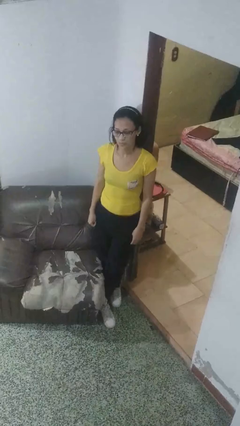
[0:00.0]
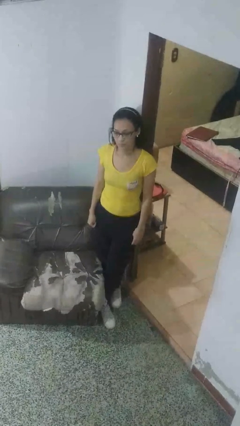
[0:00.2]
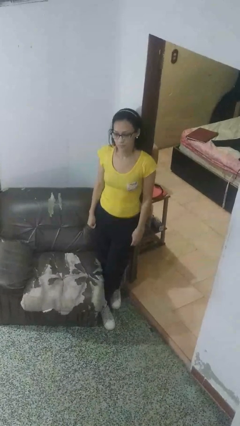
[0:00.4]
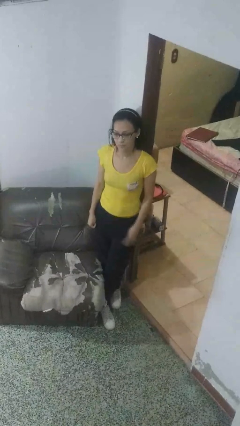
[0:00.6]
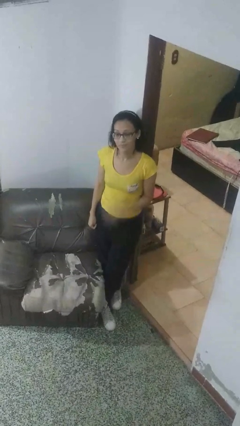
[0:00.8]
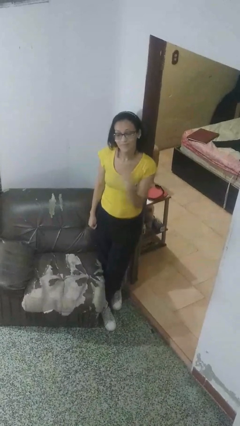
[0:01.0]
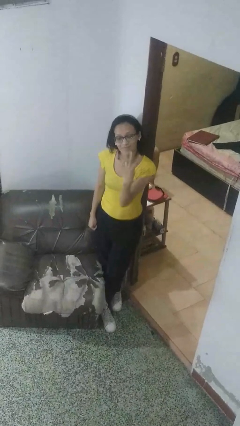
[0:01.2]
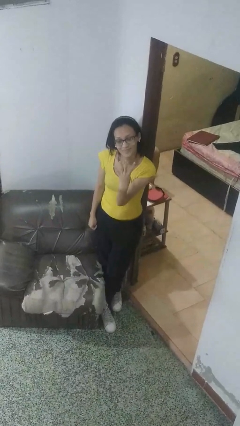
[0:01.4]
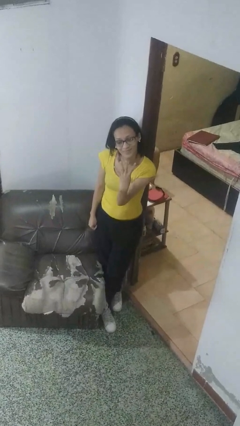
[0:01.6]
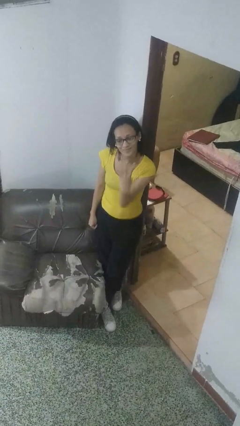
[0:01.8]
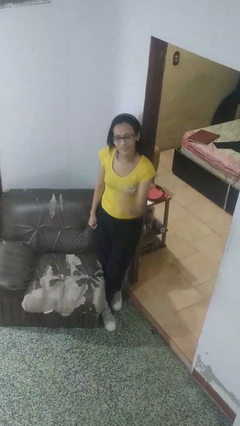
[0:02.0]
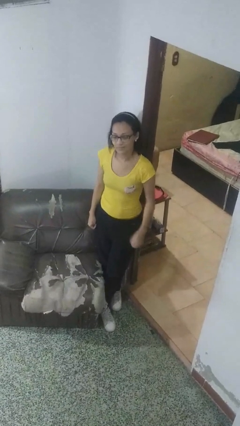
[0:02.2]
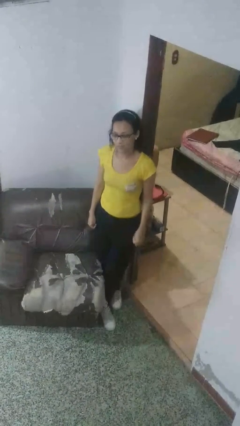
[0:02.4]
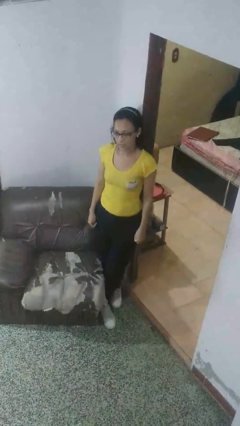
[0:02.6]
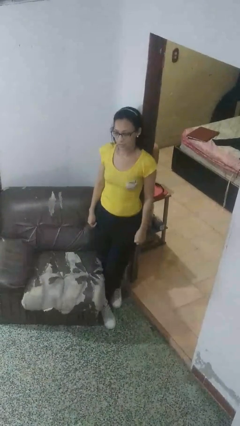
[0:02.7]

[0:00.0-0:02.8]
person gestures number four

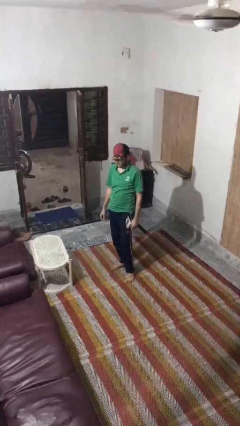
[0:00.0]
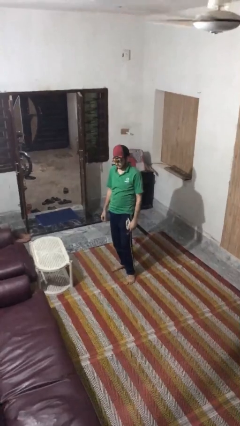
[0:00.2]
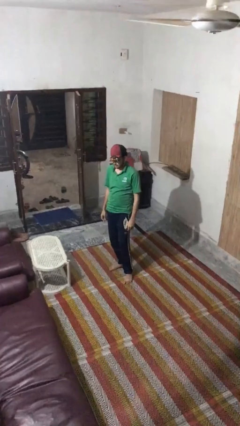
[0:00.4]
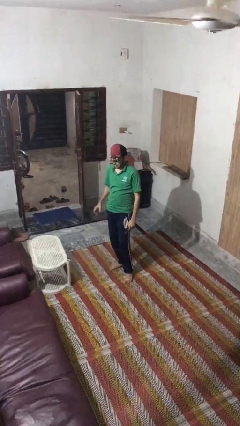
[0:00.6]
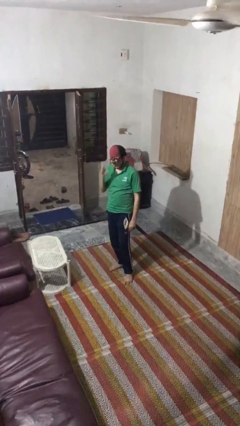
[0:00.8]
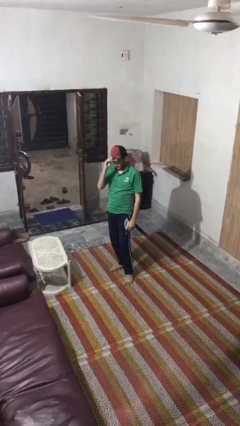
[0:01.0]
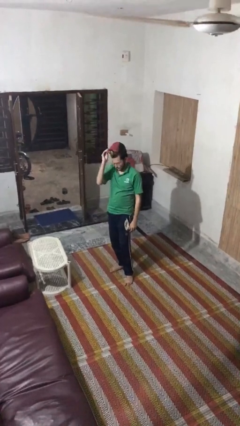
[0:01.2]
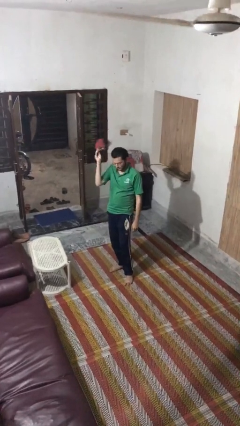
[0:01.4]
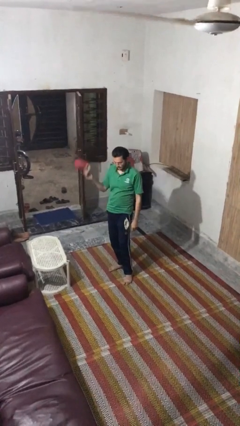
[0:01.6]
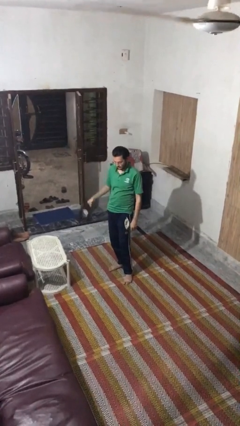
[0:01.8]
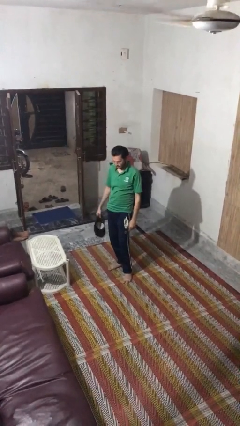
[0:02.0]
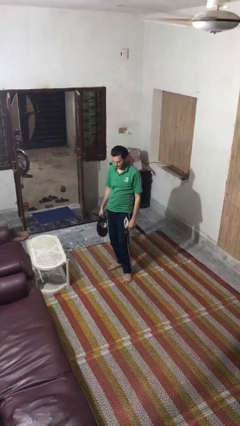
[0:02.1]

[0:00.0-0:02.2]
person takes off hat

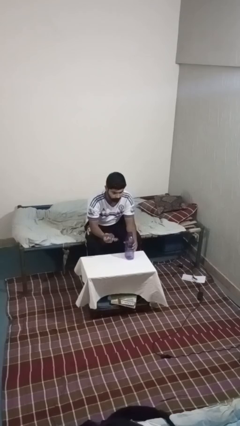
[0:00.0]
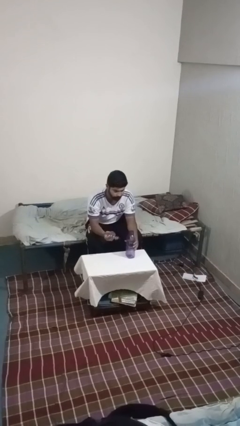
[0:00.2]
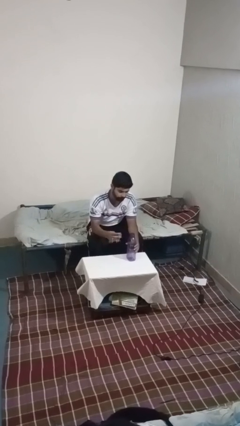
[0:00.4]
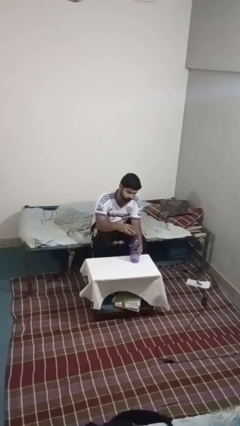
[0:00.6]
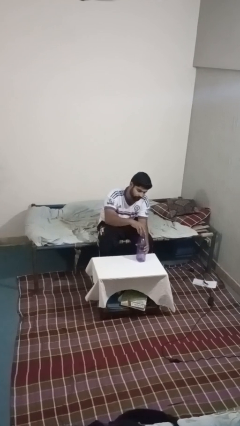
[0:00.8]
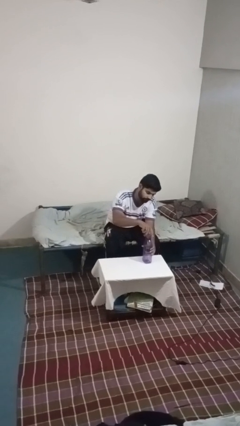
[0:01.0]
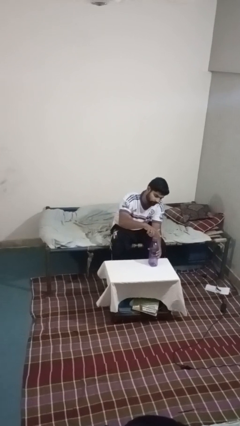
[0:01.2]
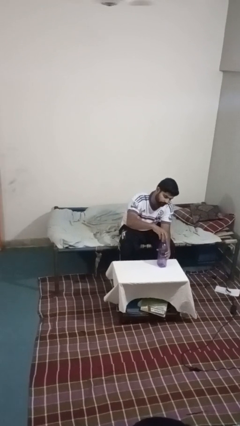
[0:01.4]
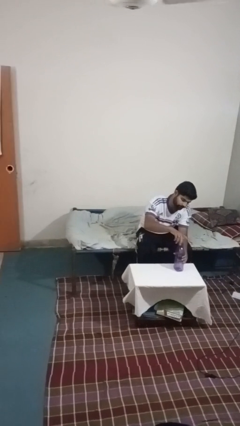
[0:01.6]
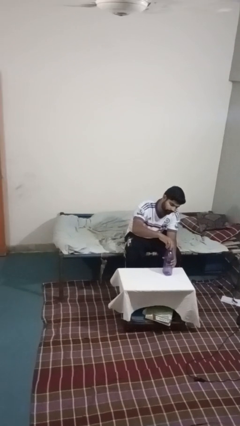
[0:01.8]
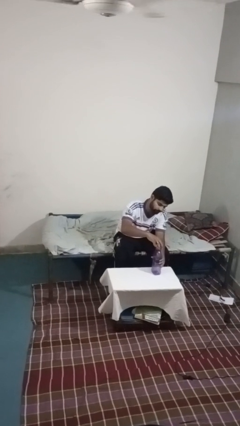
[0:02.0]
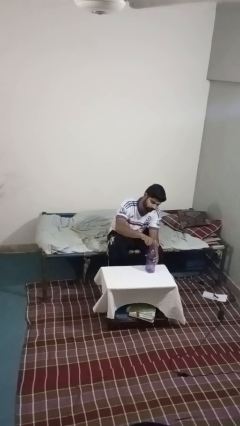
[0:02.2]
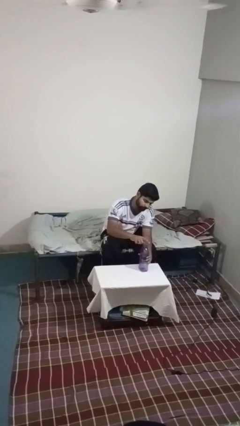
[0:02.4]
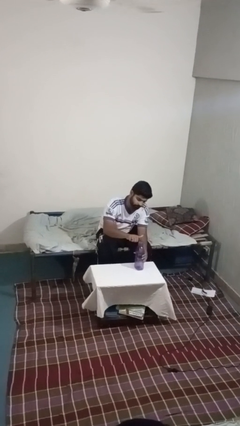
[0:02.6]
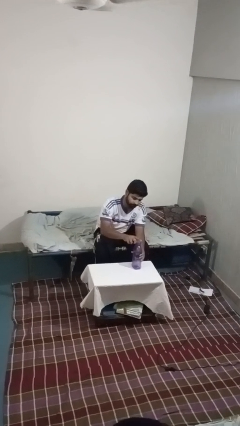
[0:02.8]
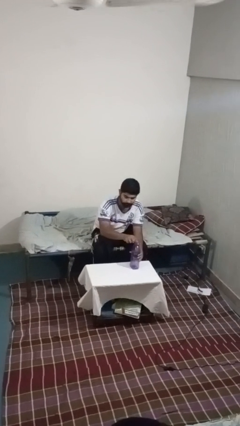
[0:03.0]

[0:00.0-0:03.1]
person screws lid to bottle

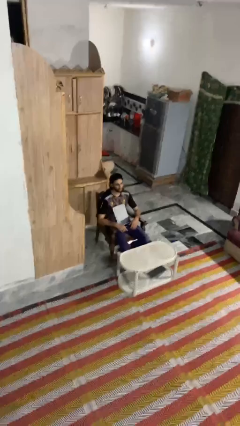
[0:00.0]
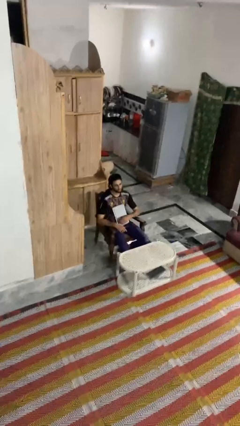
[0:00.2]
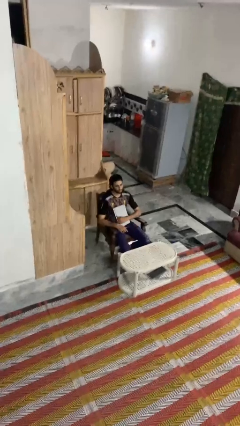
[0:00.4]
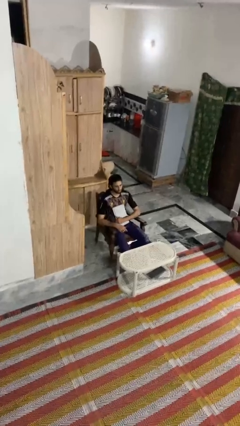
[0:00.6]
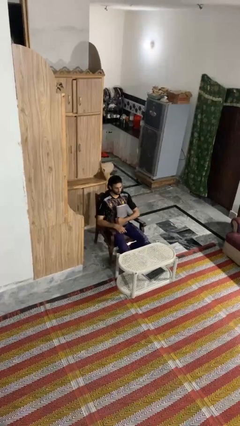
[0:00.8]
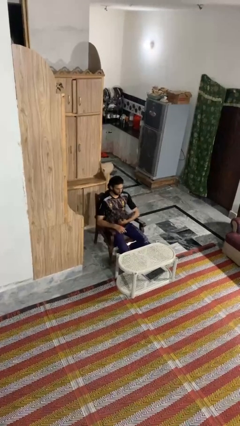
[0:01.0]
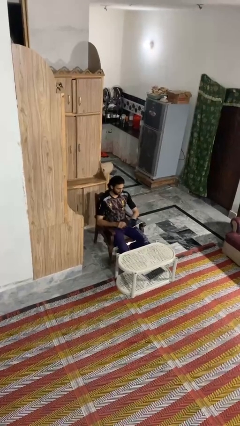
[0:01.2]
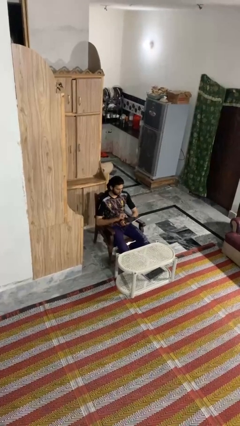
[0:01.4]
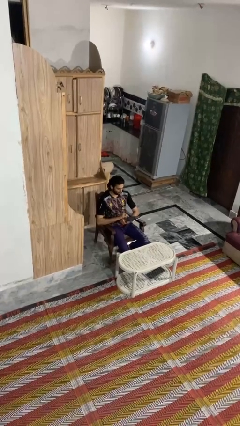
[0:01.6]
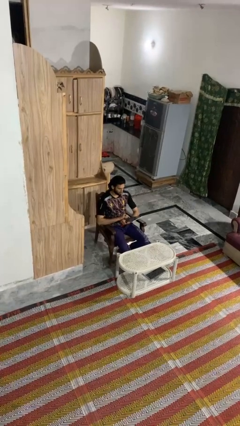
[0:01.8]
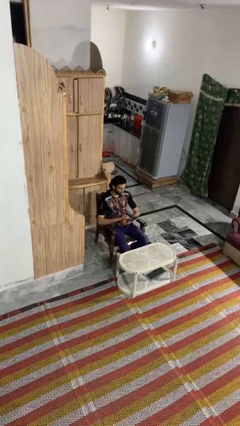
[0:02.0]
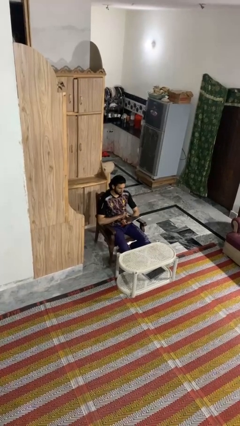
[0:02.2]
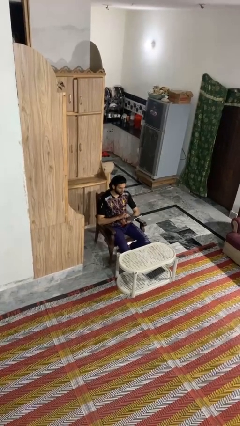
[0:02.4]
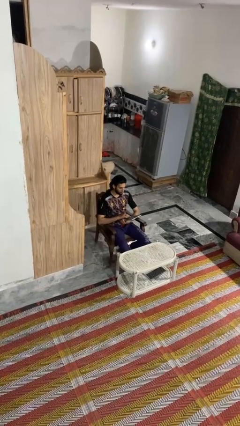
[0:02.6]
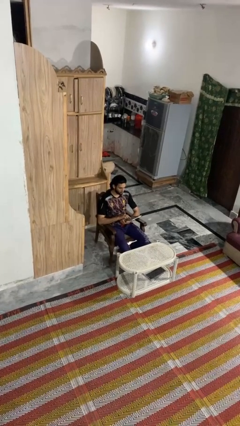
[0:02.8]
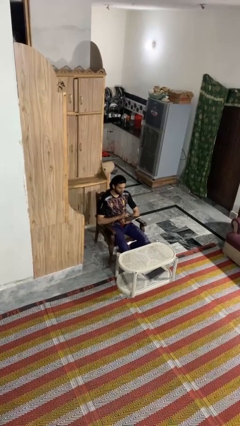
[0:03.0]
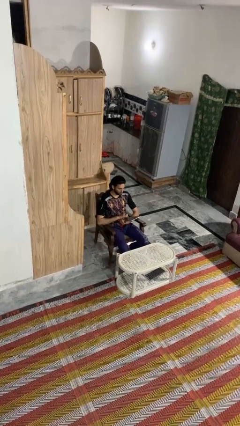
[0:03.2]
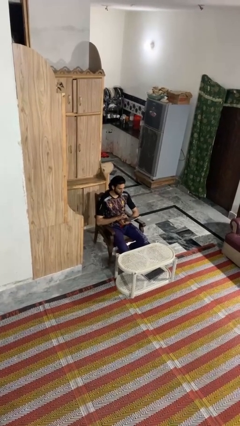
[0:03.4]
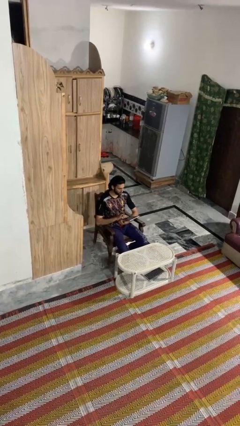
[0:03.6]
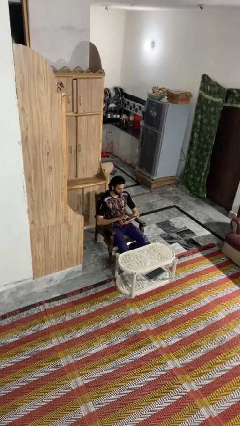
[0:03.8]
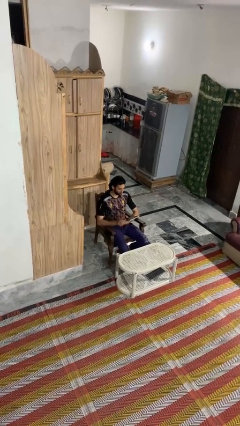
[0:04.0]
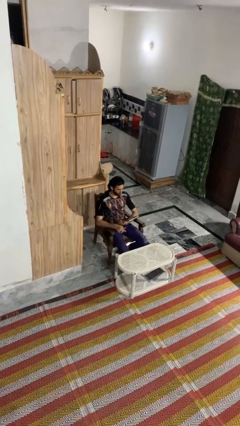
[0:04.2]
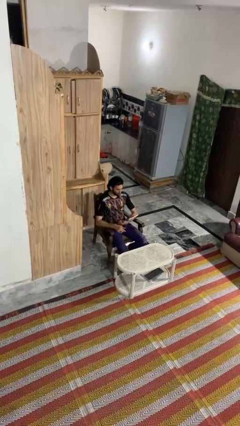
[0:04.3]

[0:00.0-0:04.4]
person interacts with tablet

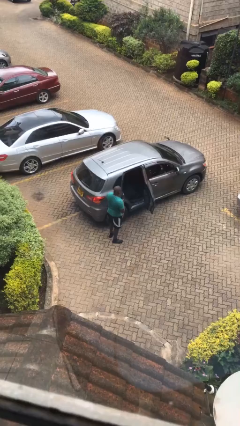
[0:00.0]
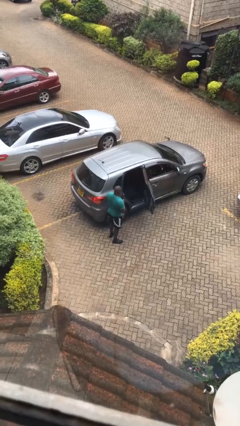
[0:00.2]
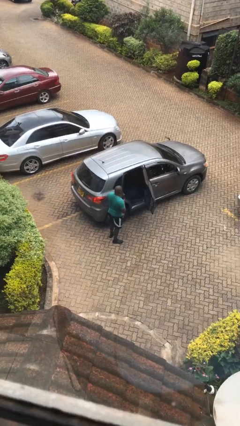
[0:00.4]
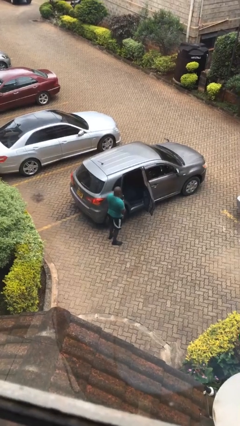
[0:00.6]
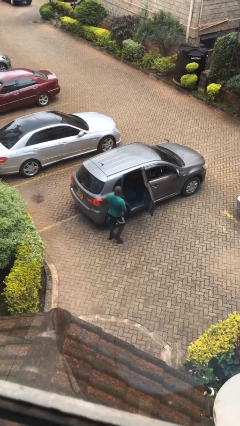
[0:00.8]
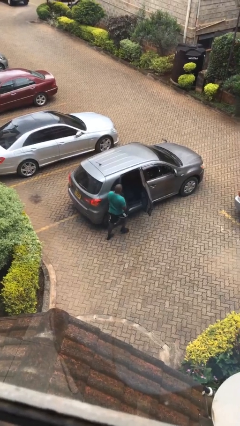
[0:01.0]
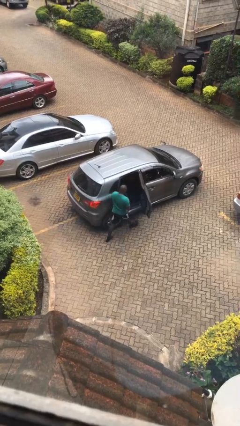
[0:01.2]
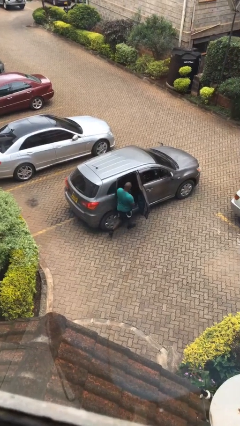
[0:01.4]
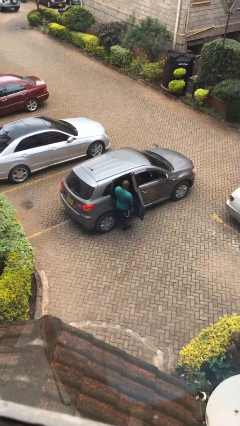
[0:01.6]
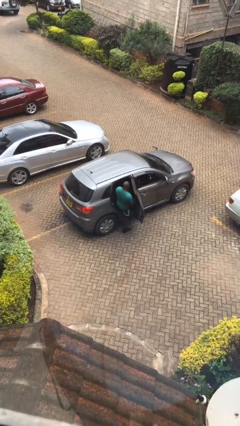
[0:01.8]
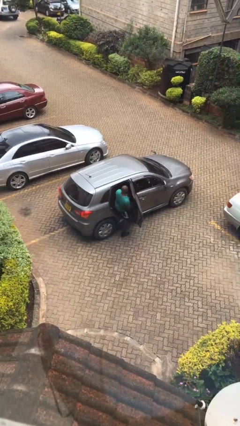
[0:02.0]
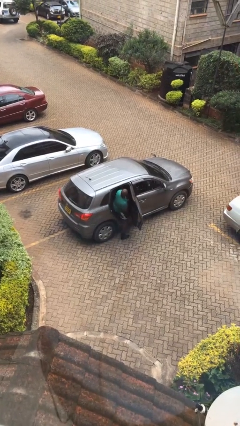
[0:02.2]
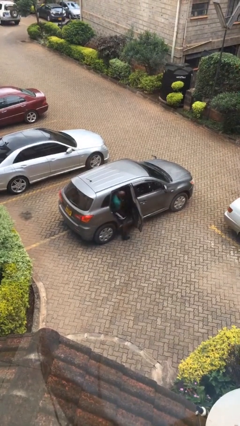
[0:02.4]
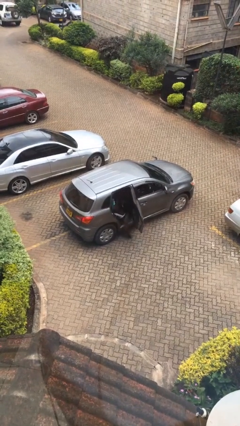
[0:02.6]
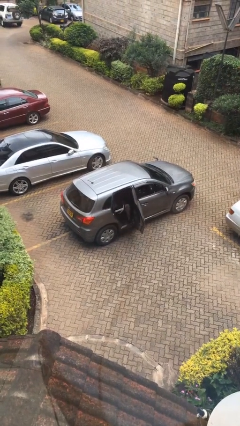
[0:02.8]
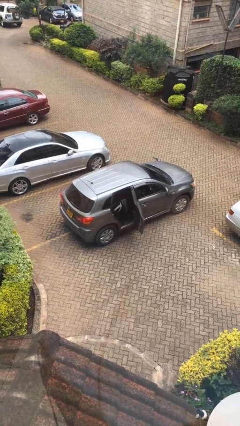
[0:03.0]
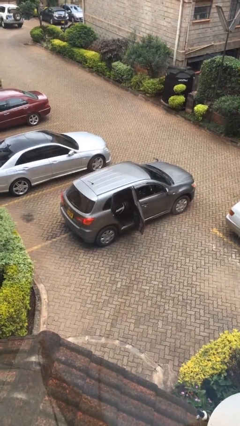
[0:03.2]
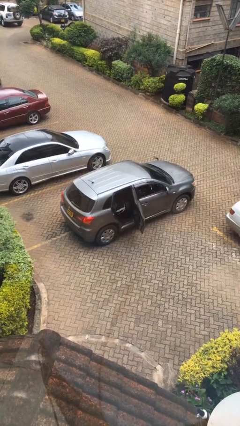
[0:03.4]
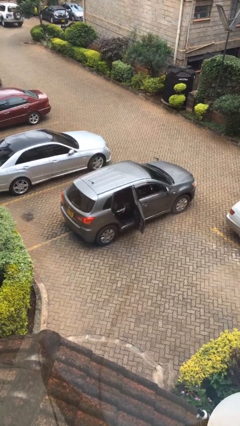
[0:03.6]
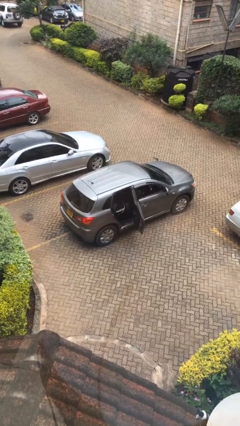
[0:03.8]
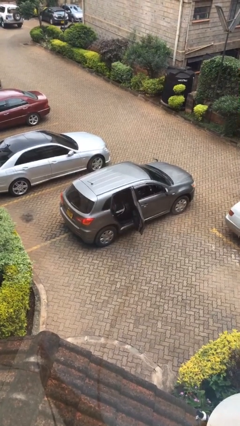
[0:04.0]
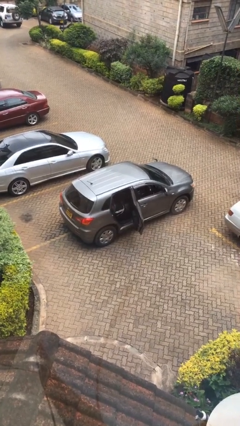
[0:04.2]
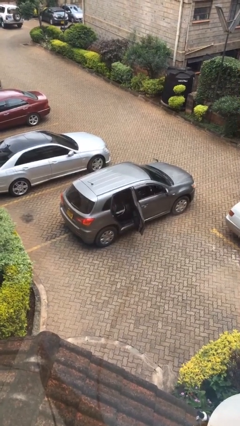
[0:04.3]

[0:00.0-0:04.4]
person enters car

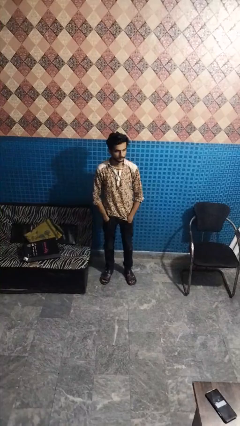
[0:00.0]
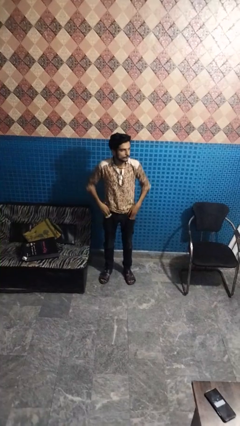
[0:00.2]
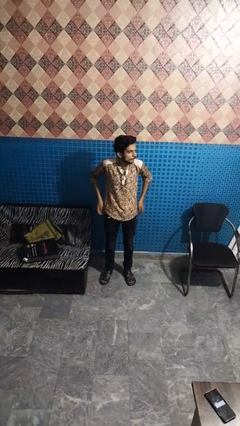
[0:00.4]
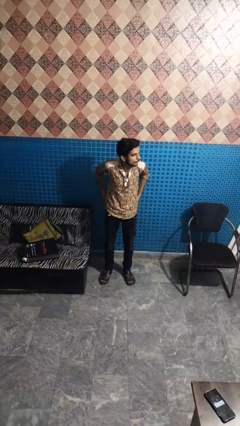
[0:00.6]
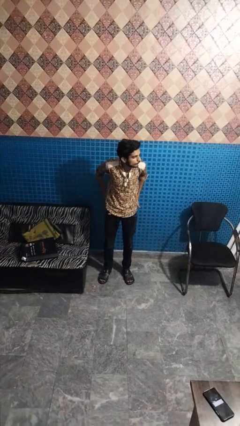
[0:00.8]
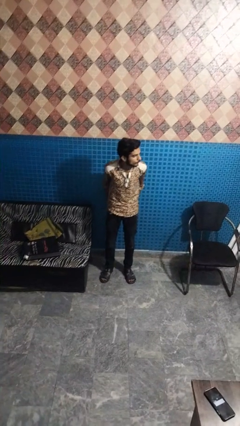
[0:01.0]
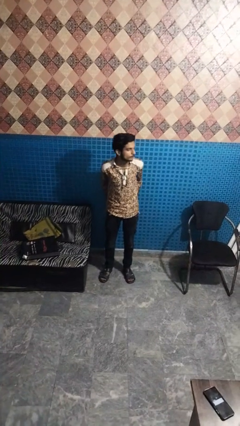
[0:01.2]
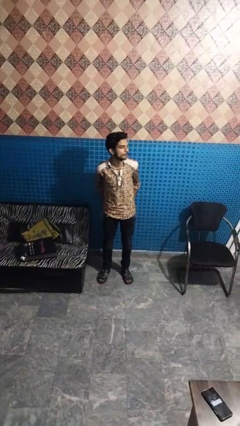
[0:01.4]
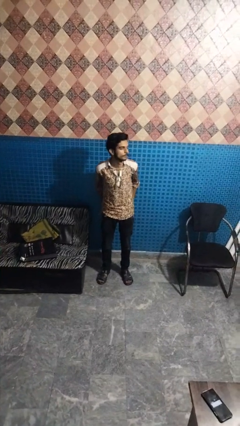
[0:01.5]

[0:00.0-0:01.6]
person puts hands in back pockets
